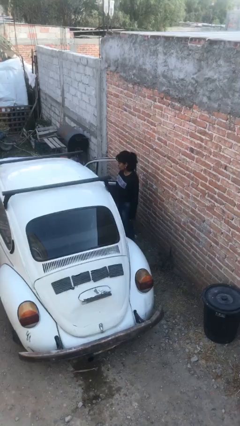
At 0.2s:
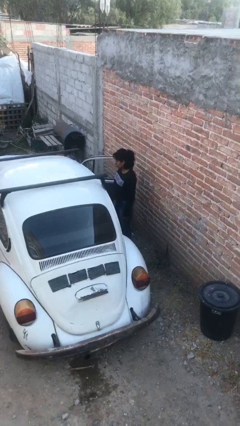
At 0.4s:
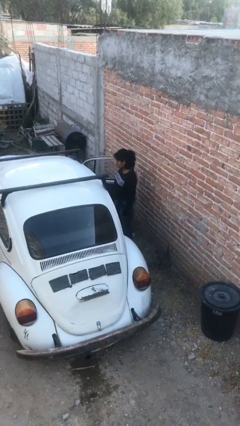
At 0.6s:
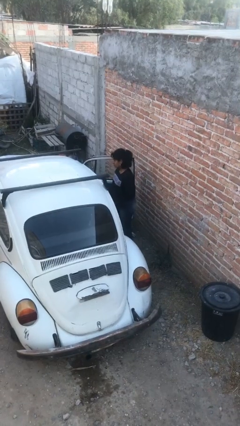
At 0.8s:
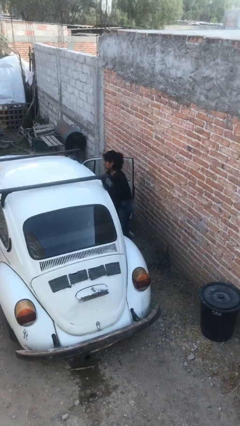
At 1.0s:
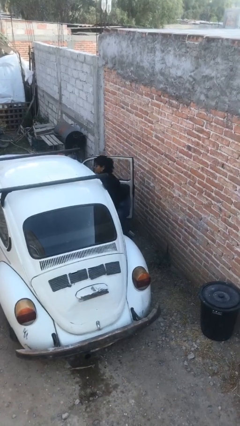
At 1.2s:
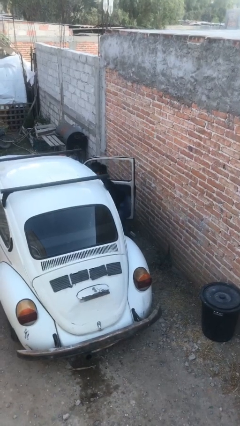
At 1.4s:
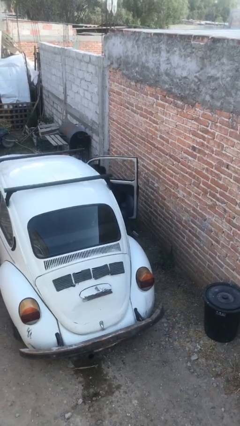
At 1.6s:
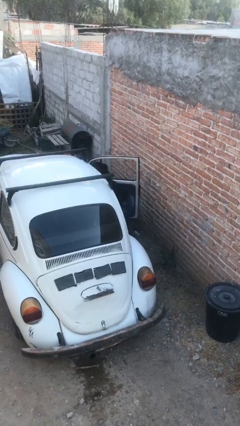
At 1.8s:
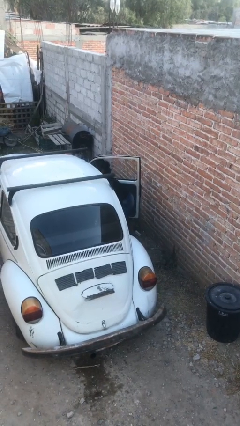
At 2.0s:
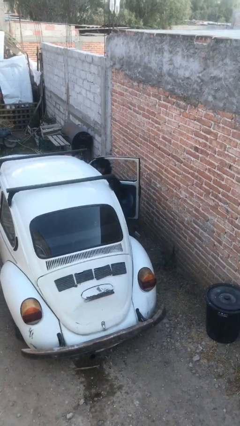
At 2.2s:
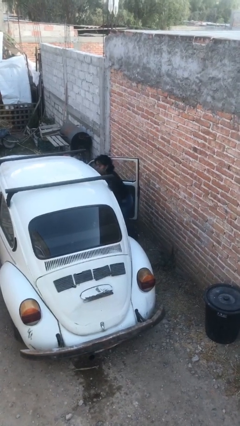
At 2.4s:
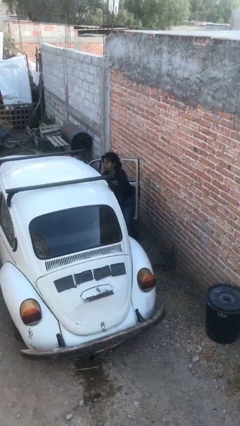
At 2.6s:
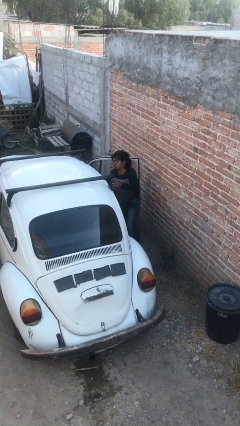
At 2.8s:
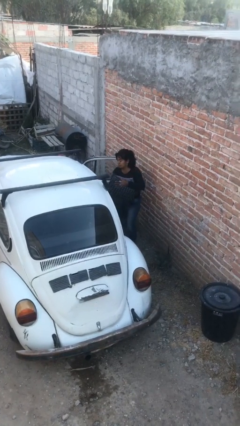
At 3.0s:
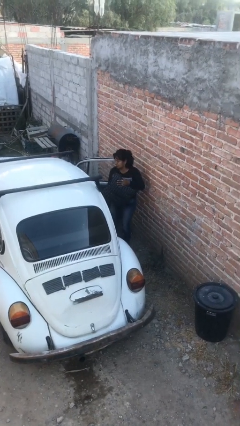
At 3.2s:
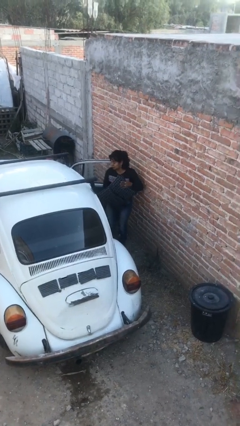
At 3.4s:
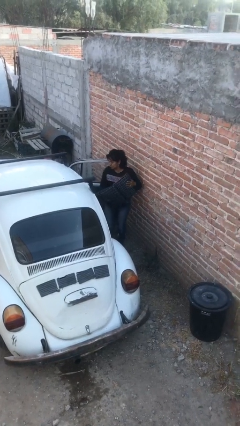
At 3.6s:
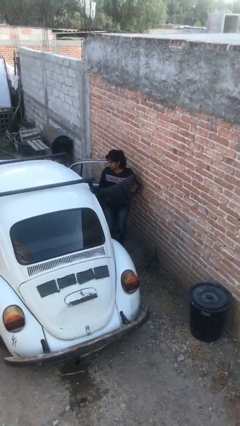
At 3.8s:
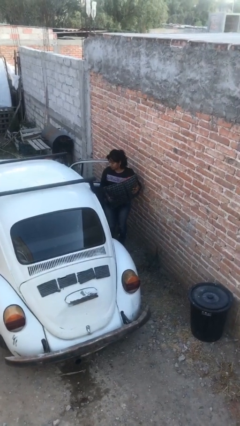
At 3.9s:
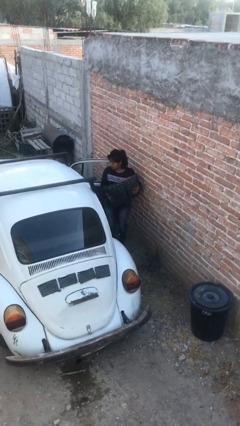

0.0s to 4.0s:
person unloads car

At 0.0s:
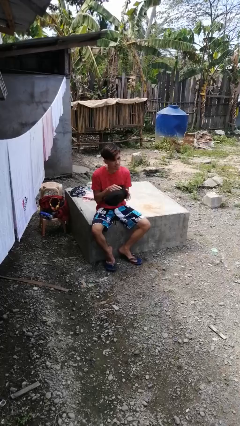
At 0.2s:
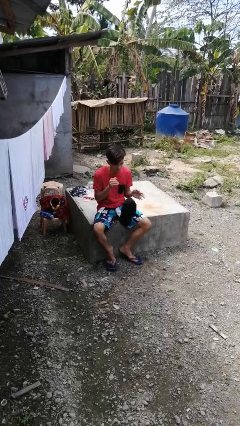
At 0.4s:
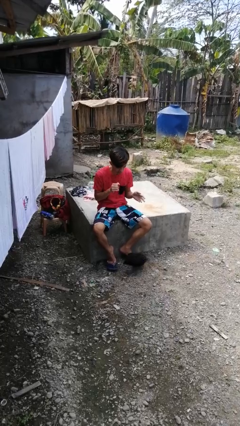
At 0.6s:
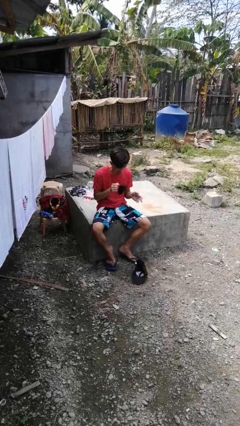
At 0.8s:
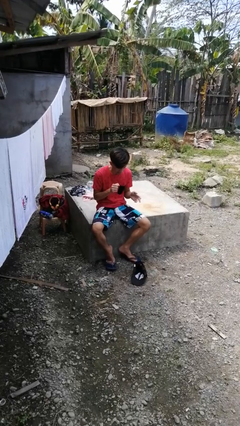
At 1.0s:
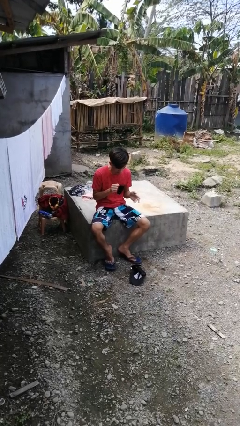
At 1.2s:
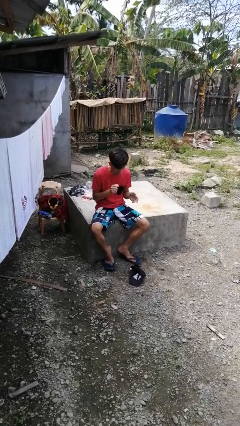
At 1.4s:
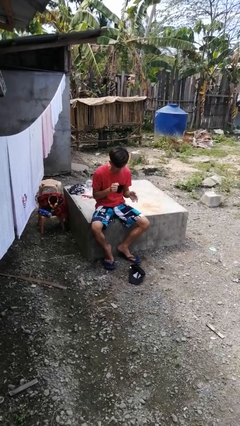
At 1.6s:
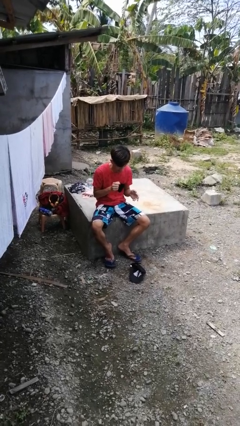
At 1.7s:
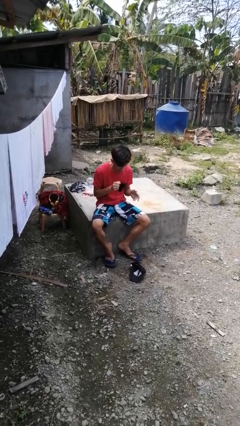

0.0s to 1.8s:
person drops object

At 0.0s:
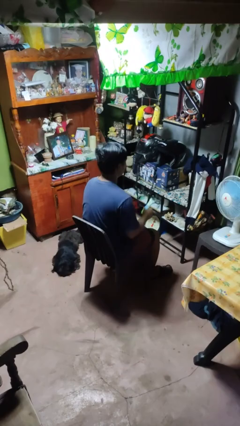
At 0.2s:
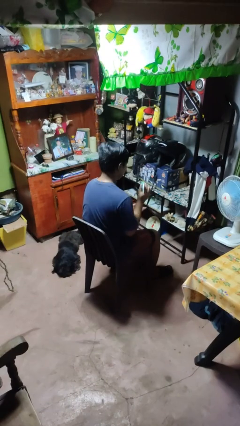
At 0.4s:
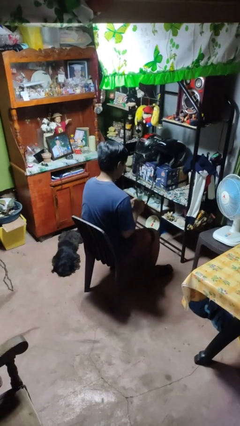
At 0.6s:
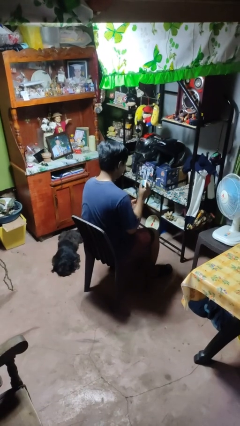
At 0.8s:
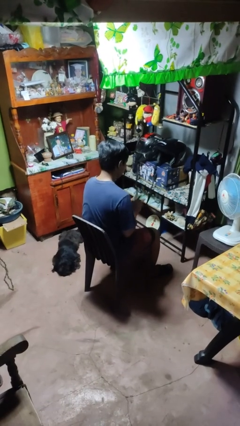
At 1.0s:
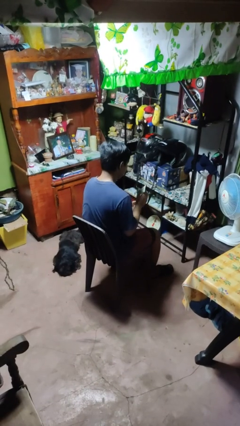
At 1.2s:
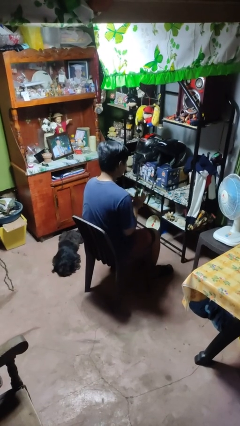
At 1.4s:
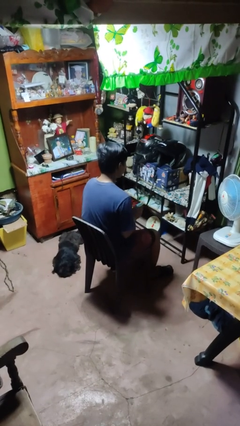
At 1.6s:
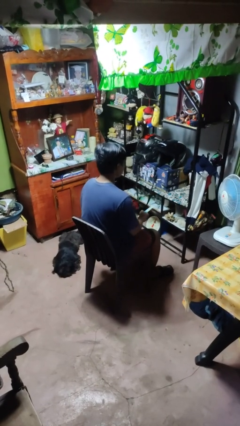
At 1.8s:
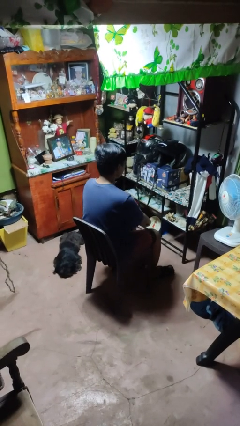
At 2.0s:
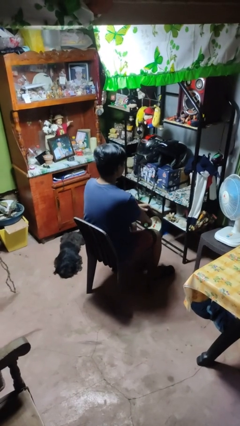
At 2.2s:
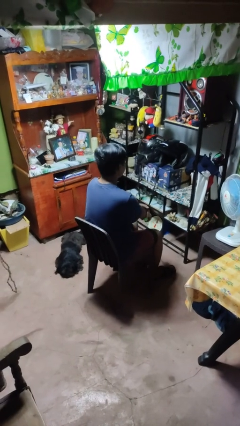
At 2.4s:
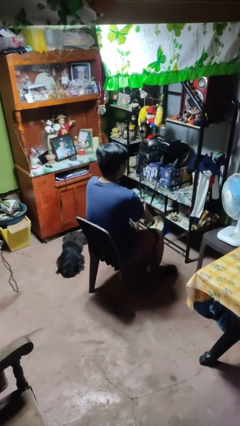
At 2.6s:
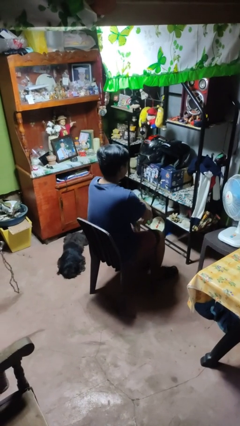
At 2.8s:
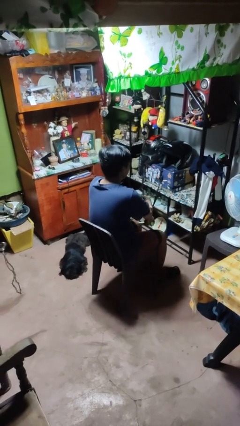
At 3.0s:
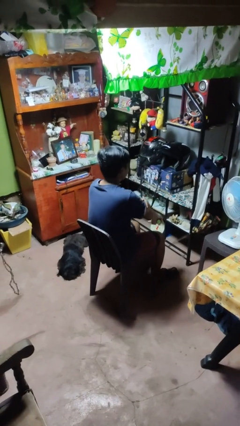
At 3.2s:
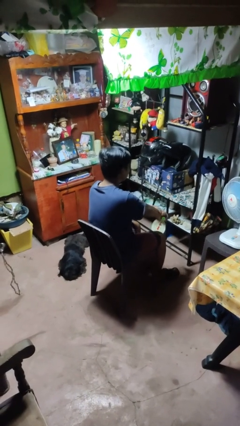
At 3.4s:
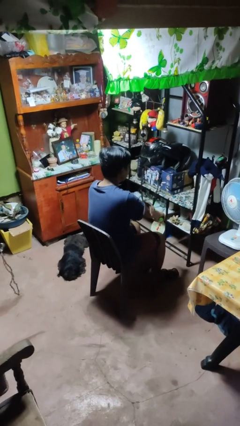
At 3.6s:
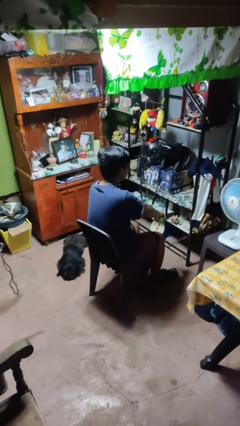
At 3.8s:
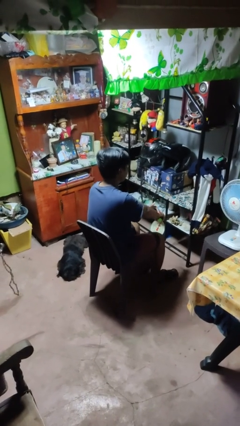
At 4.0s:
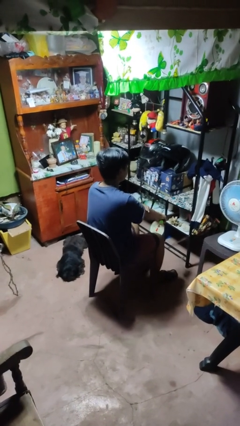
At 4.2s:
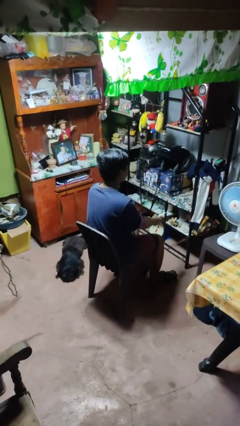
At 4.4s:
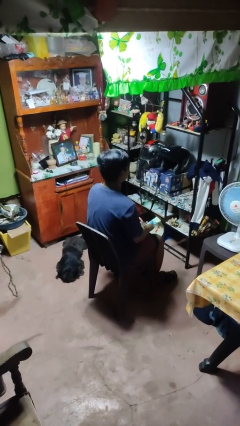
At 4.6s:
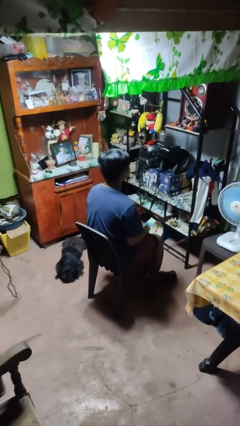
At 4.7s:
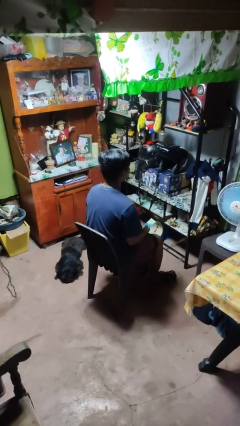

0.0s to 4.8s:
person applies sunscreen

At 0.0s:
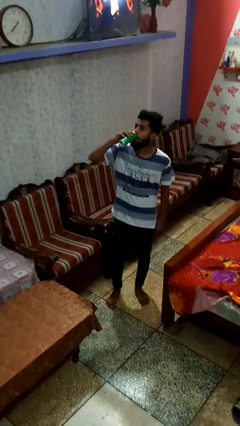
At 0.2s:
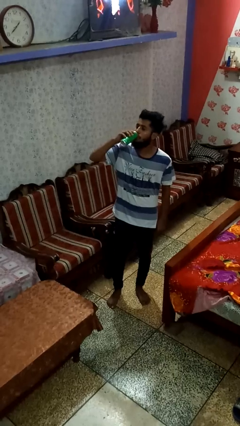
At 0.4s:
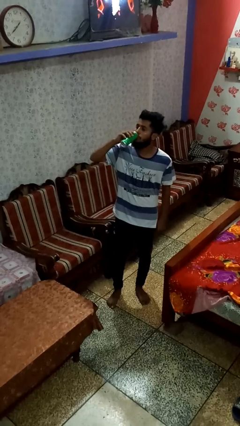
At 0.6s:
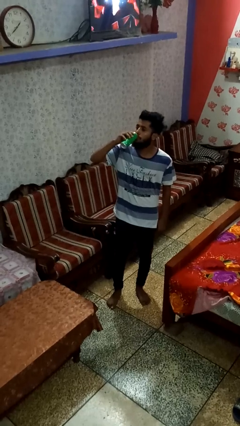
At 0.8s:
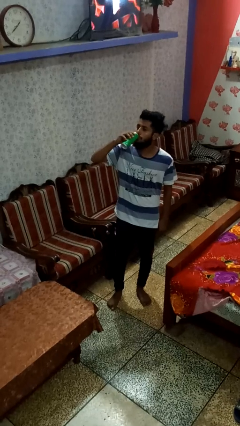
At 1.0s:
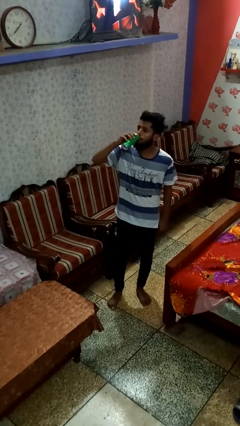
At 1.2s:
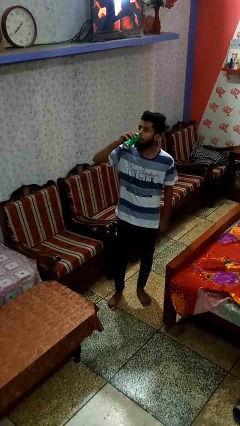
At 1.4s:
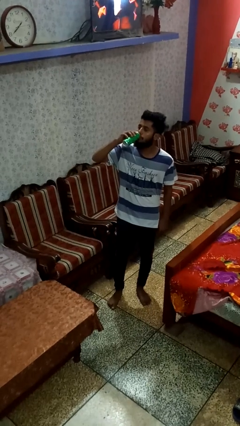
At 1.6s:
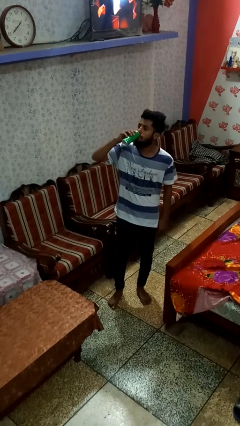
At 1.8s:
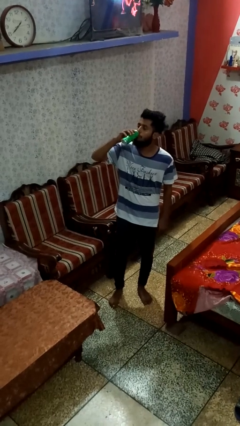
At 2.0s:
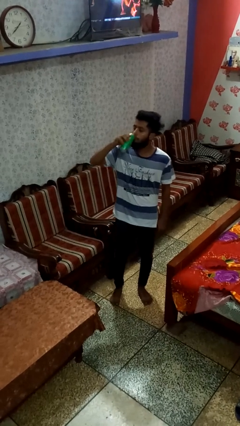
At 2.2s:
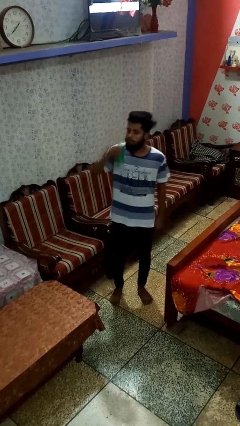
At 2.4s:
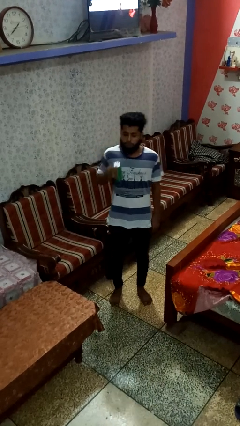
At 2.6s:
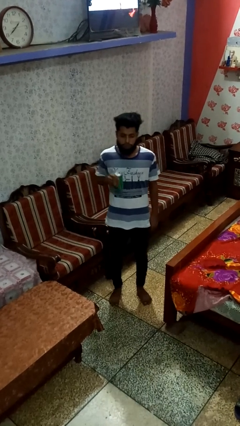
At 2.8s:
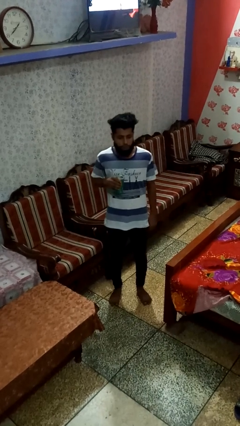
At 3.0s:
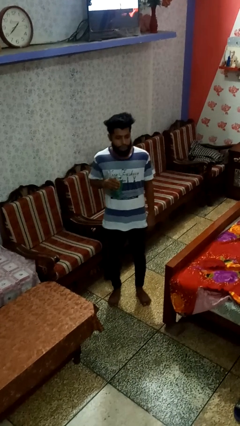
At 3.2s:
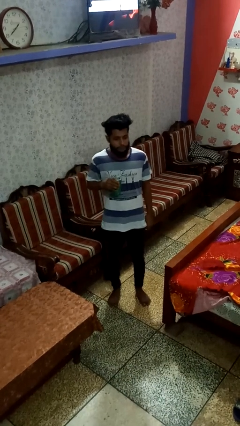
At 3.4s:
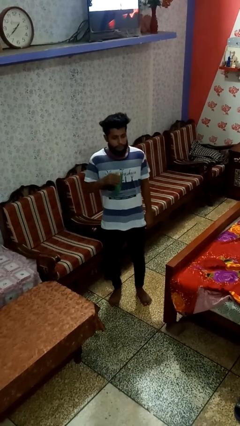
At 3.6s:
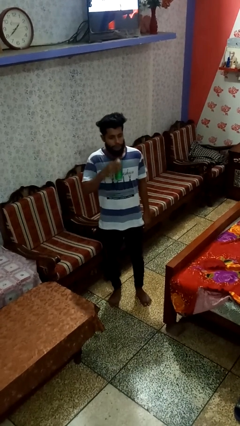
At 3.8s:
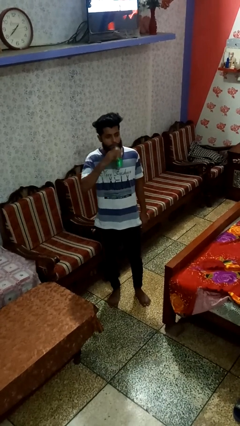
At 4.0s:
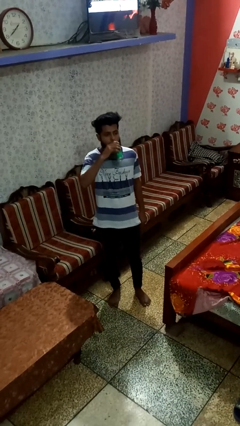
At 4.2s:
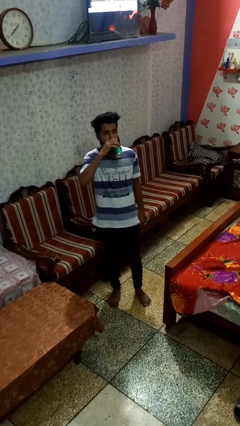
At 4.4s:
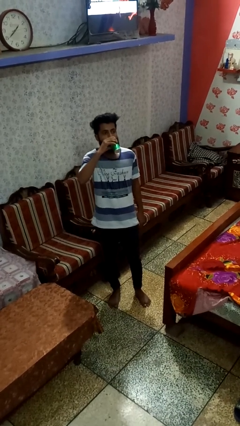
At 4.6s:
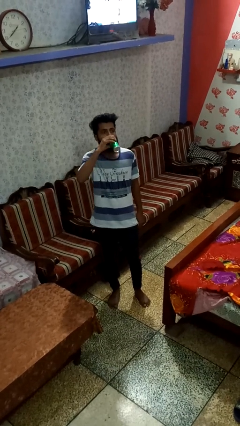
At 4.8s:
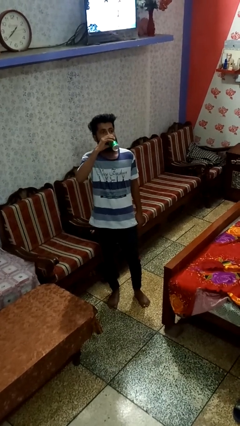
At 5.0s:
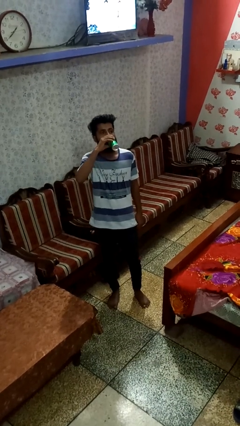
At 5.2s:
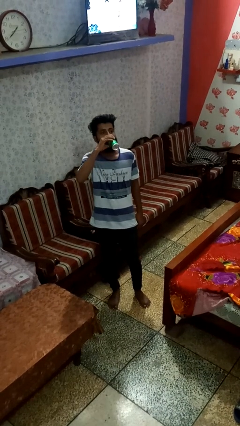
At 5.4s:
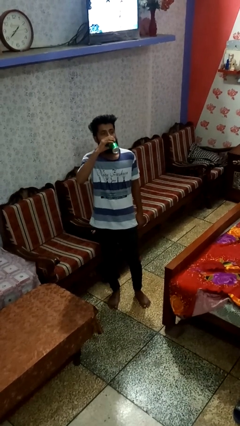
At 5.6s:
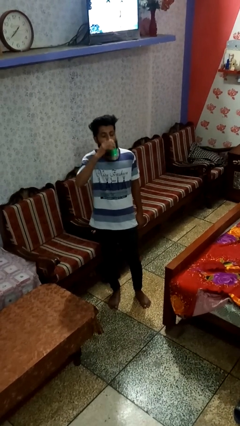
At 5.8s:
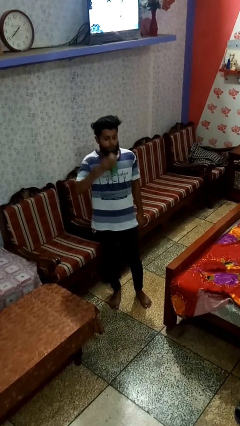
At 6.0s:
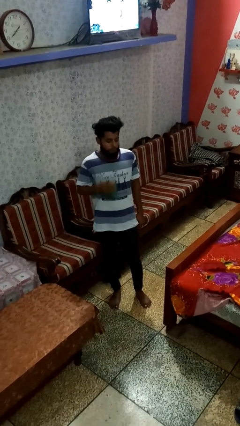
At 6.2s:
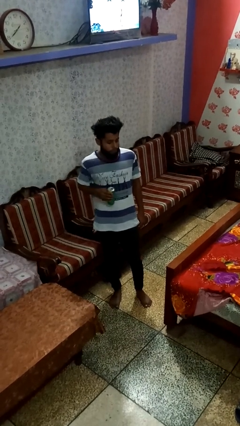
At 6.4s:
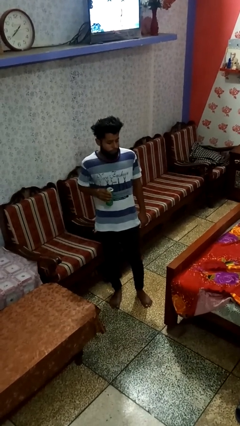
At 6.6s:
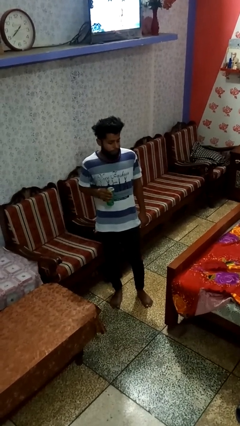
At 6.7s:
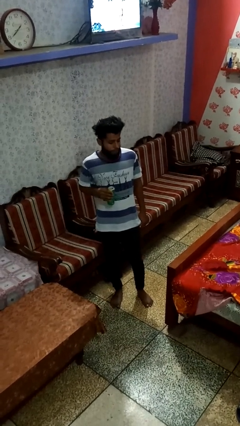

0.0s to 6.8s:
person drinks from beverage can

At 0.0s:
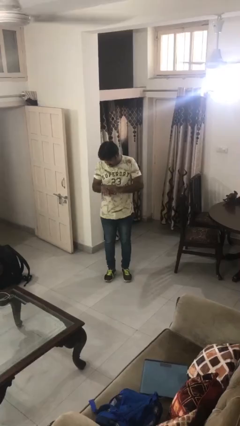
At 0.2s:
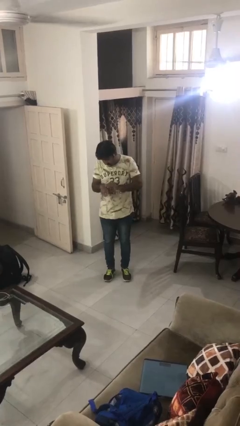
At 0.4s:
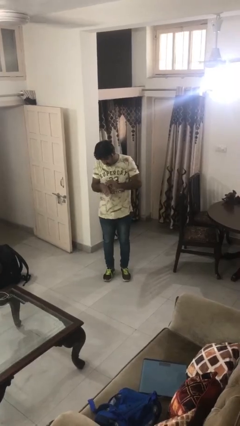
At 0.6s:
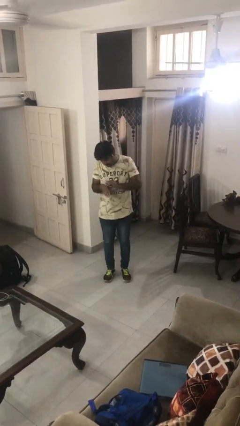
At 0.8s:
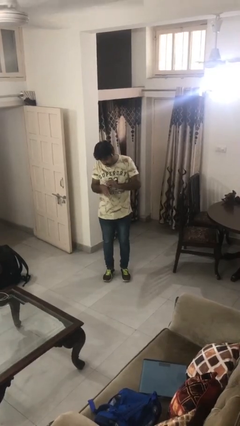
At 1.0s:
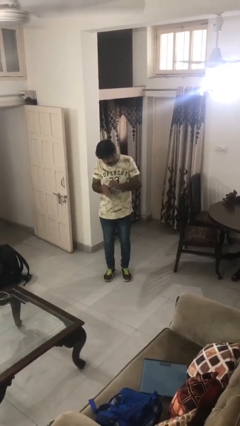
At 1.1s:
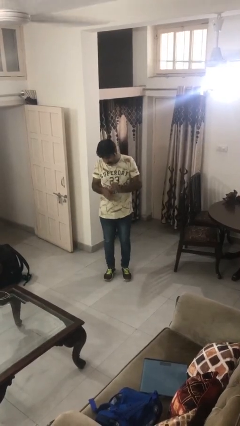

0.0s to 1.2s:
person swats bug
